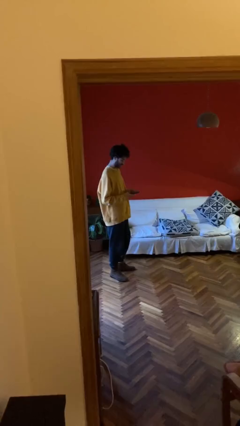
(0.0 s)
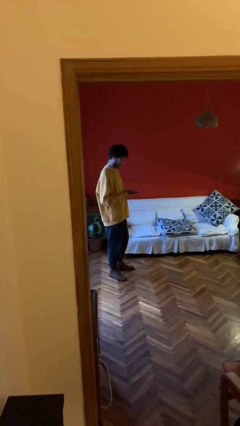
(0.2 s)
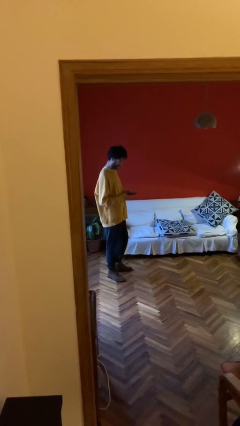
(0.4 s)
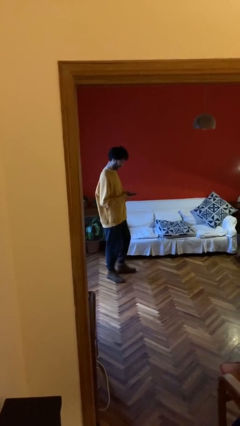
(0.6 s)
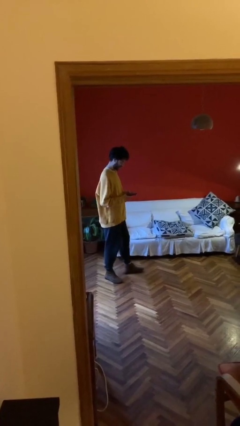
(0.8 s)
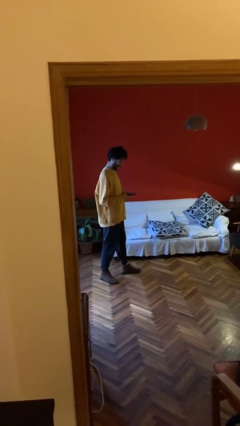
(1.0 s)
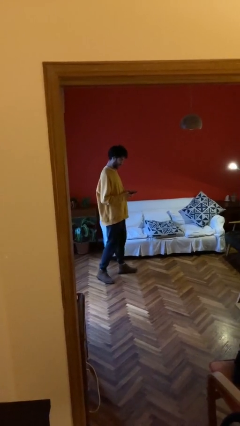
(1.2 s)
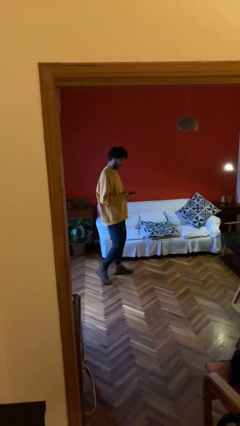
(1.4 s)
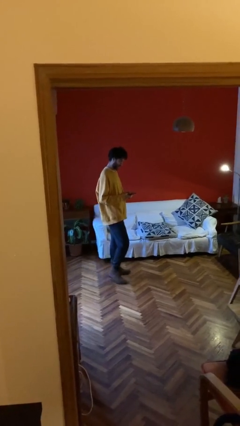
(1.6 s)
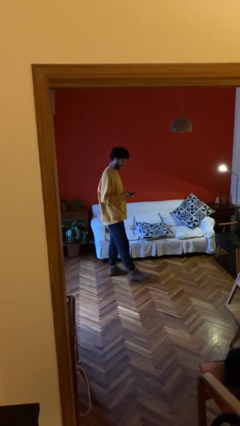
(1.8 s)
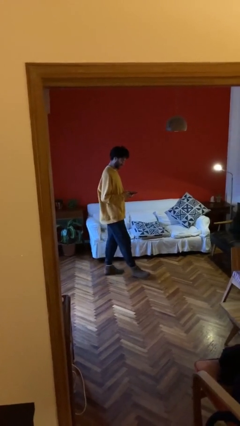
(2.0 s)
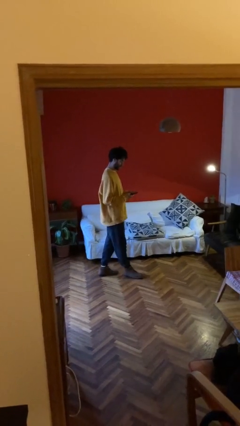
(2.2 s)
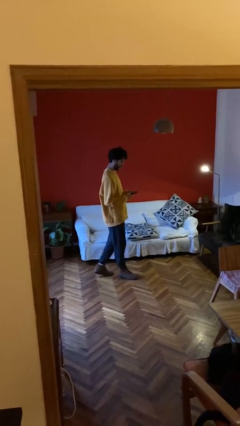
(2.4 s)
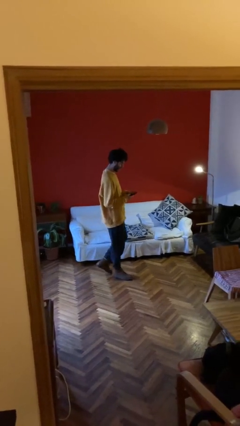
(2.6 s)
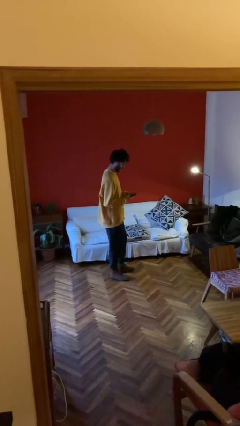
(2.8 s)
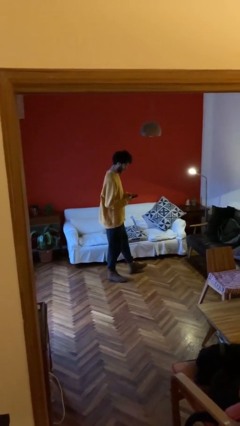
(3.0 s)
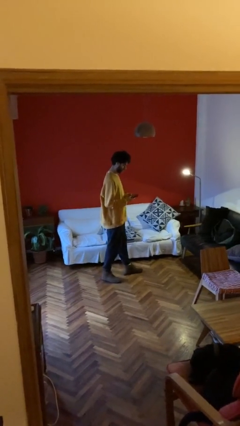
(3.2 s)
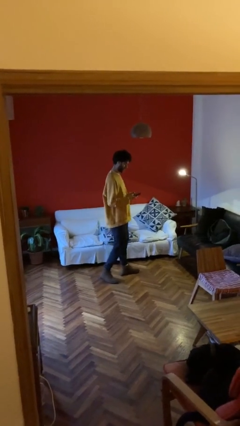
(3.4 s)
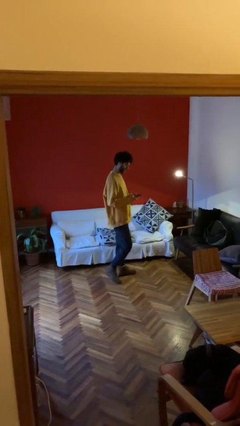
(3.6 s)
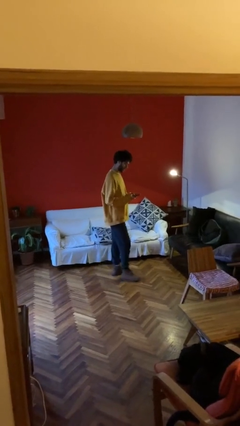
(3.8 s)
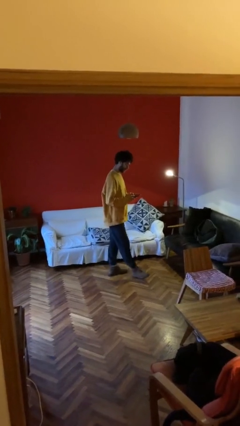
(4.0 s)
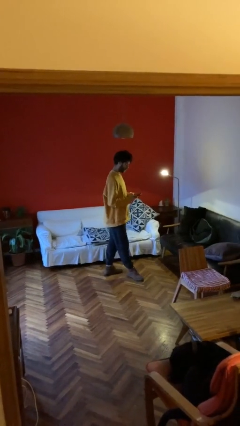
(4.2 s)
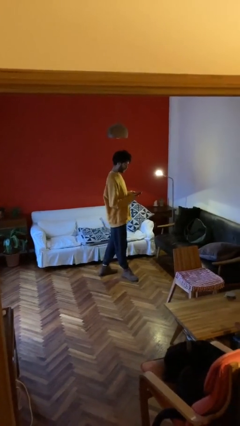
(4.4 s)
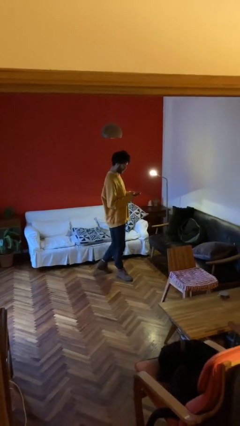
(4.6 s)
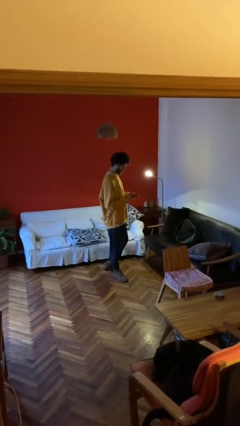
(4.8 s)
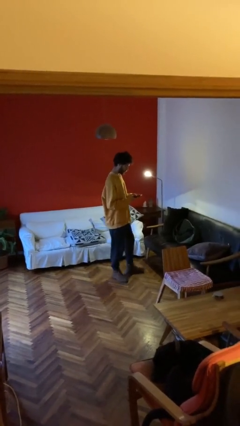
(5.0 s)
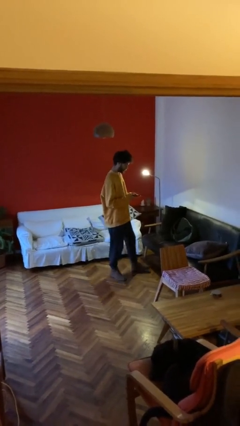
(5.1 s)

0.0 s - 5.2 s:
person texts on phone

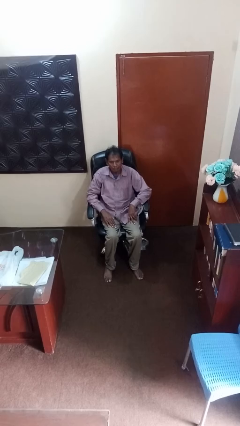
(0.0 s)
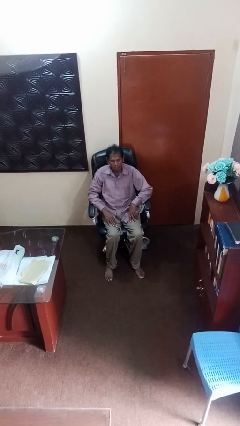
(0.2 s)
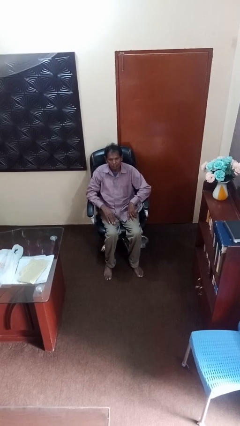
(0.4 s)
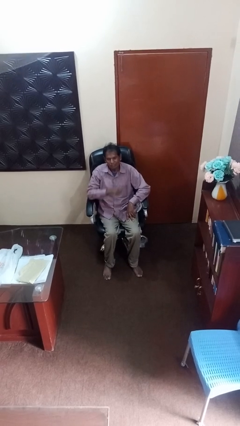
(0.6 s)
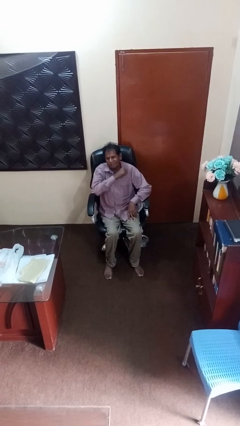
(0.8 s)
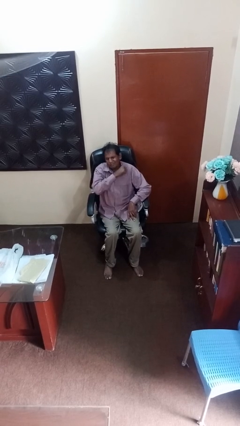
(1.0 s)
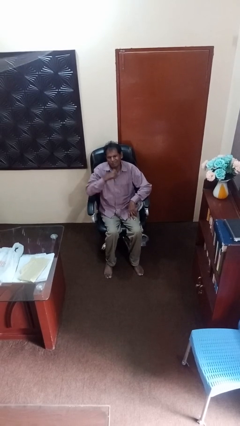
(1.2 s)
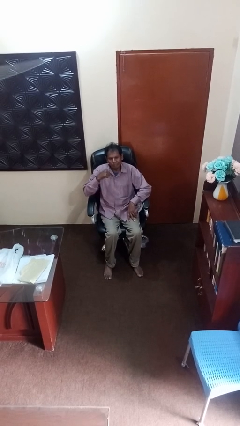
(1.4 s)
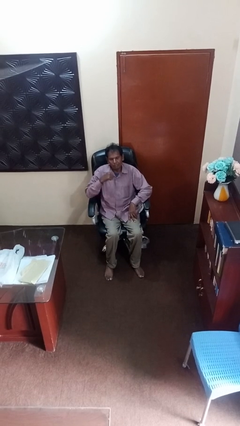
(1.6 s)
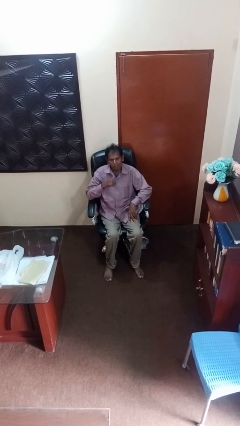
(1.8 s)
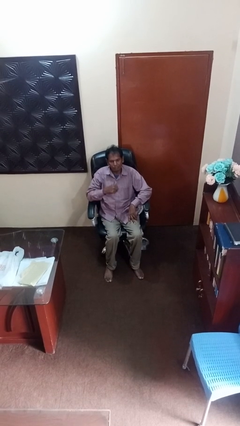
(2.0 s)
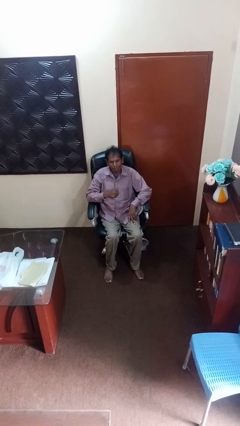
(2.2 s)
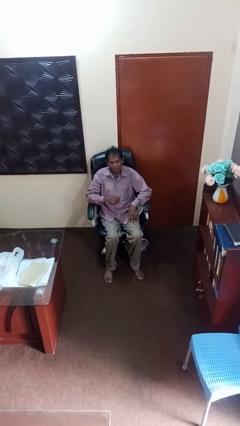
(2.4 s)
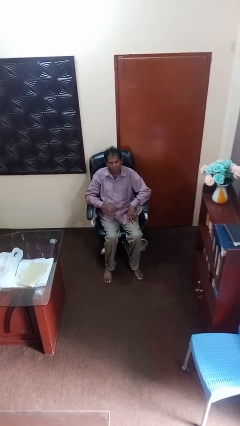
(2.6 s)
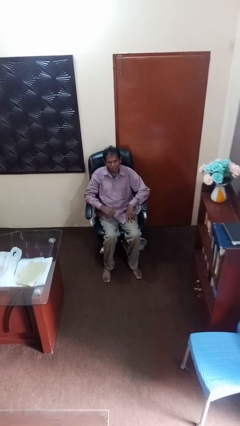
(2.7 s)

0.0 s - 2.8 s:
person gestures cut

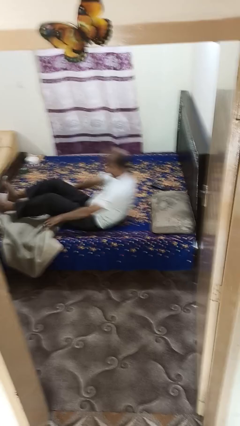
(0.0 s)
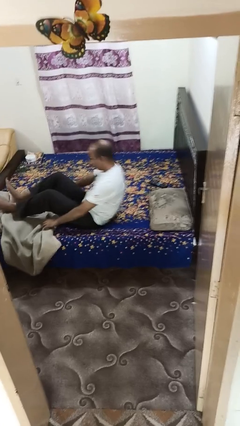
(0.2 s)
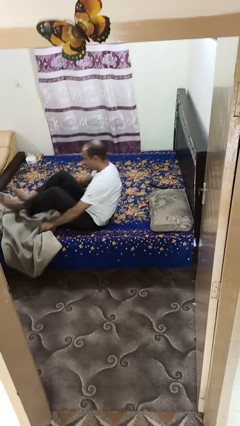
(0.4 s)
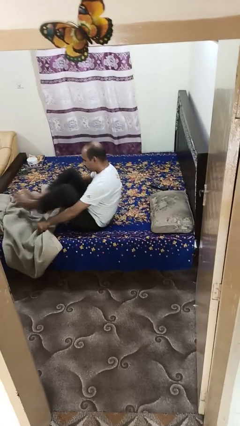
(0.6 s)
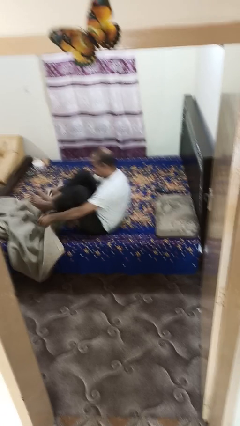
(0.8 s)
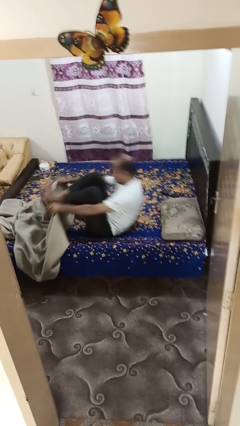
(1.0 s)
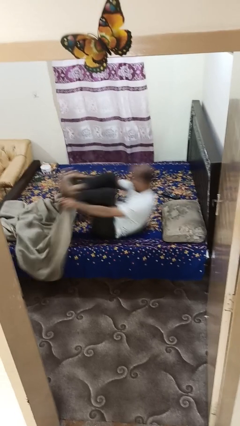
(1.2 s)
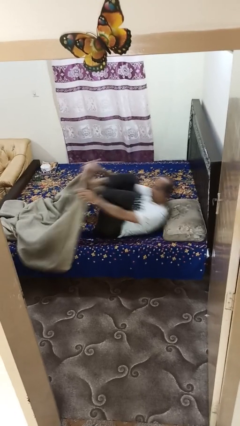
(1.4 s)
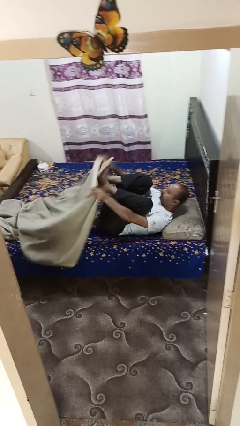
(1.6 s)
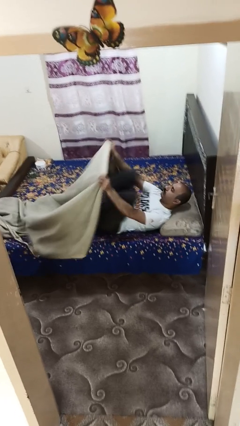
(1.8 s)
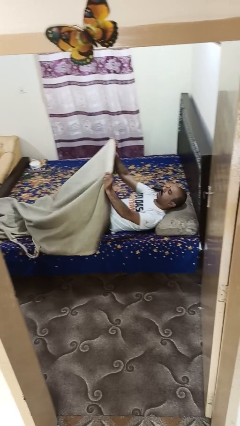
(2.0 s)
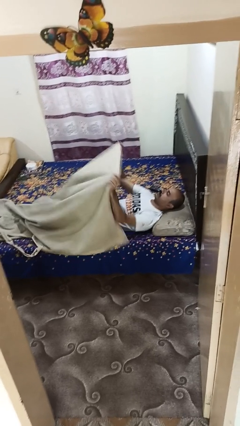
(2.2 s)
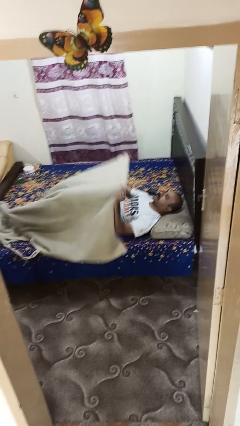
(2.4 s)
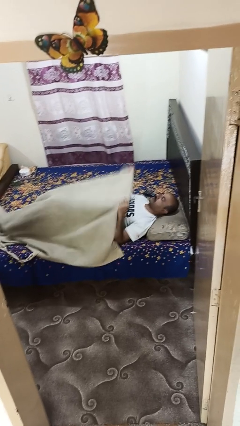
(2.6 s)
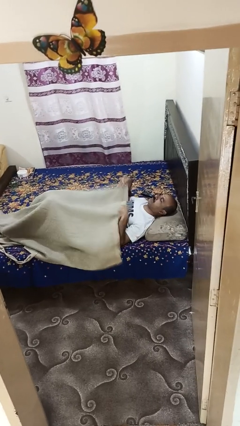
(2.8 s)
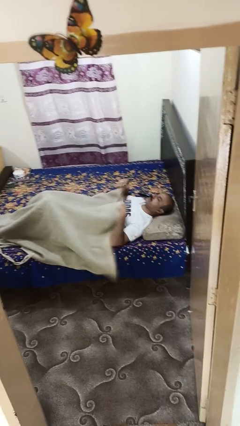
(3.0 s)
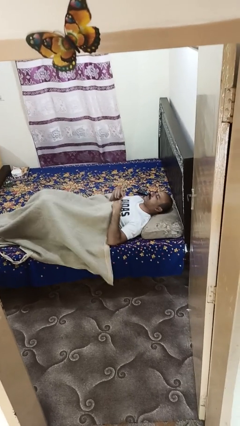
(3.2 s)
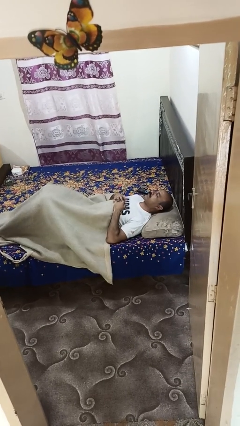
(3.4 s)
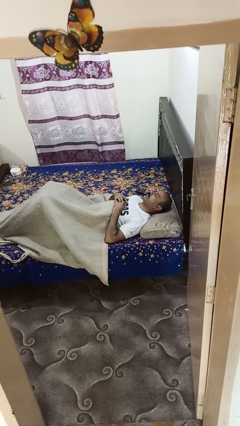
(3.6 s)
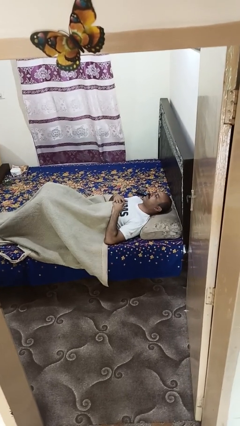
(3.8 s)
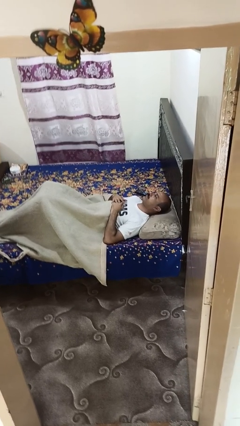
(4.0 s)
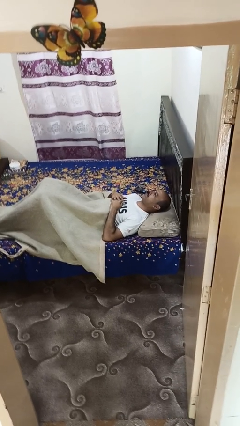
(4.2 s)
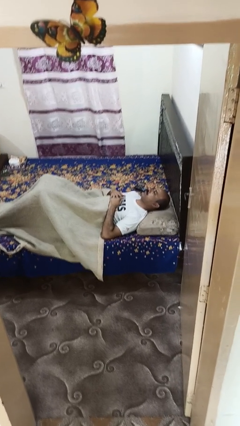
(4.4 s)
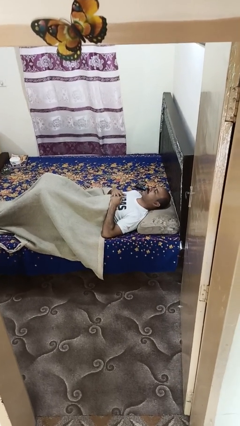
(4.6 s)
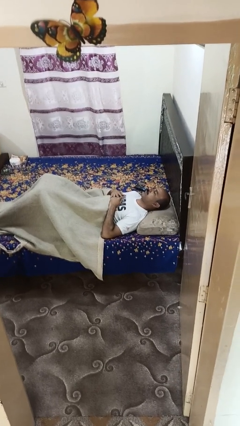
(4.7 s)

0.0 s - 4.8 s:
person covers with bedsheets

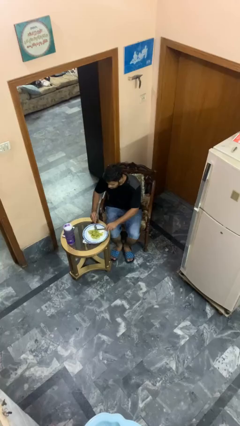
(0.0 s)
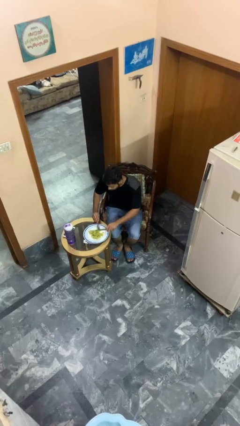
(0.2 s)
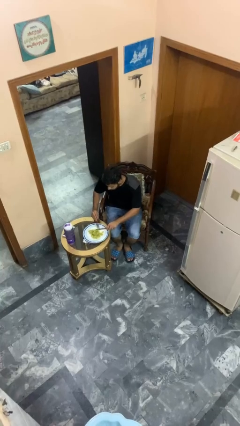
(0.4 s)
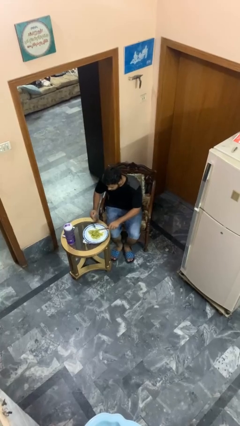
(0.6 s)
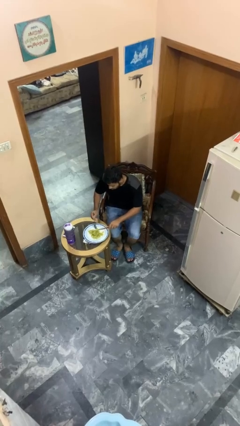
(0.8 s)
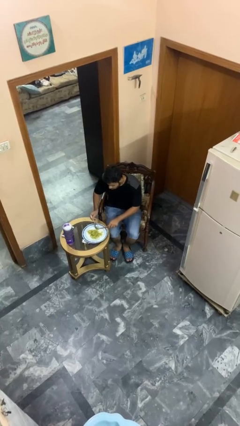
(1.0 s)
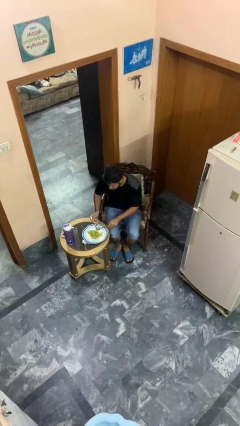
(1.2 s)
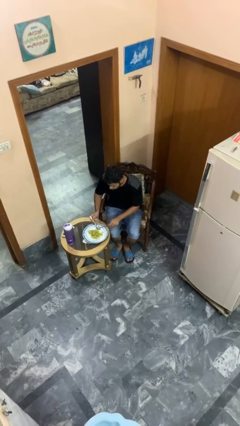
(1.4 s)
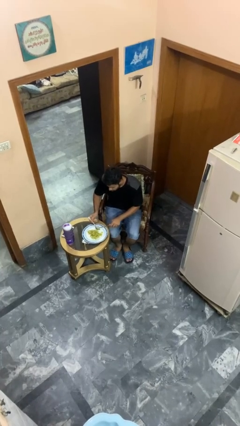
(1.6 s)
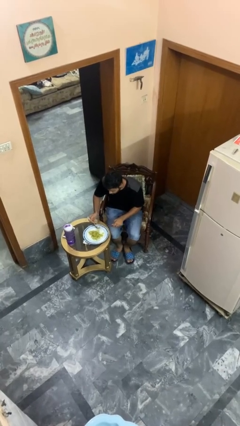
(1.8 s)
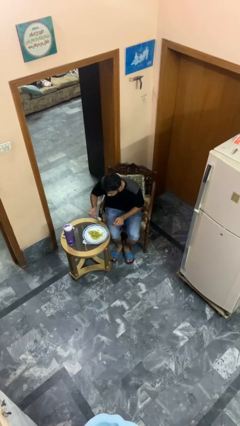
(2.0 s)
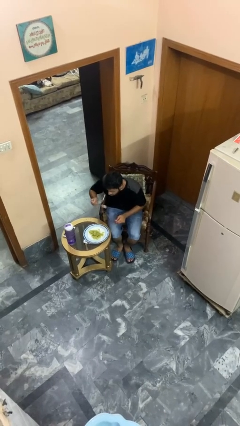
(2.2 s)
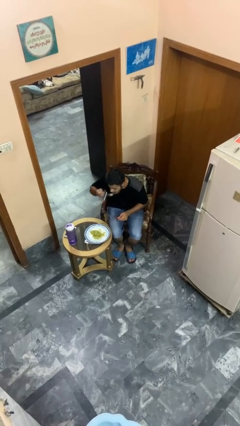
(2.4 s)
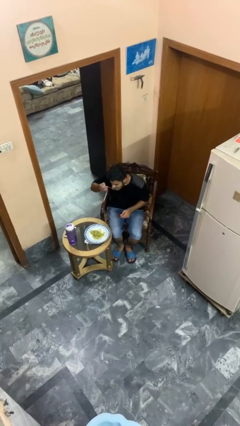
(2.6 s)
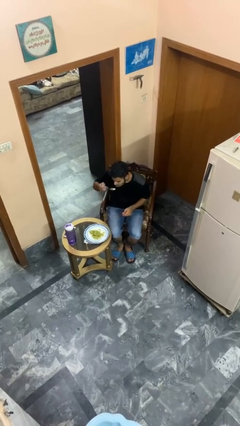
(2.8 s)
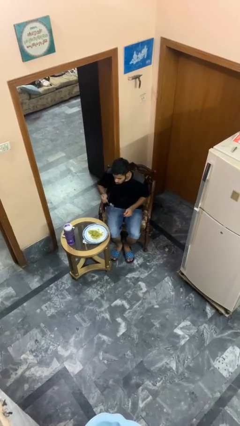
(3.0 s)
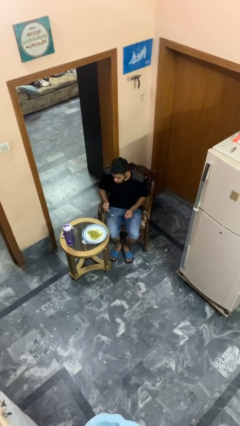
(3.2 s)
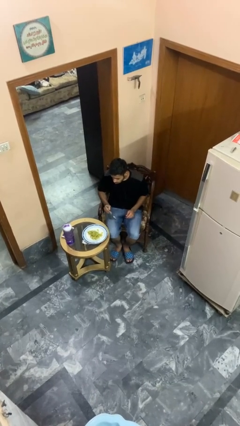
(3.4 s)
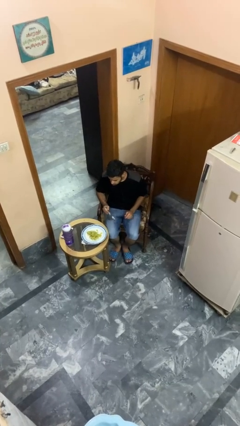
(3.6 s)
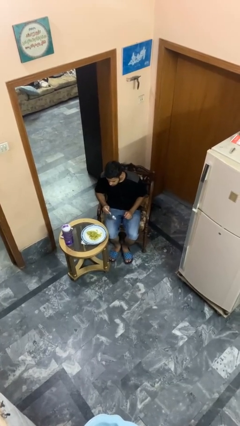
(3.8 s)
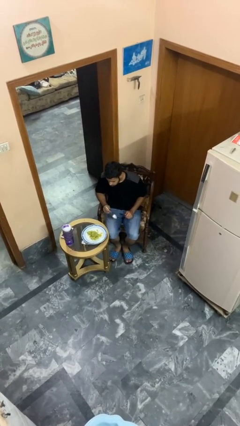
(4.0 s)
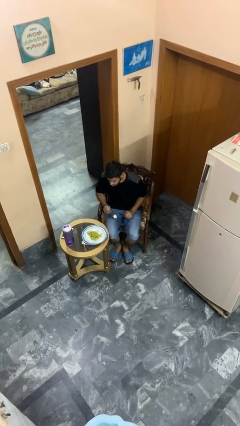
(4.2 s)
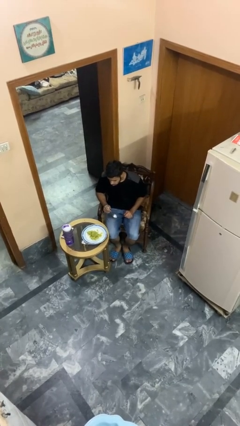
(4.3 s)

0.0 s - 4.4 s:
person eats with utensil

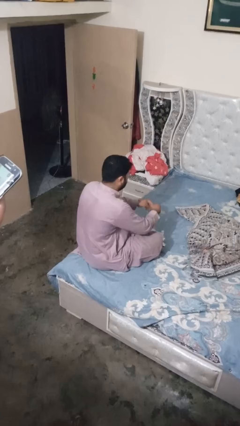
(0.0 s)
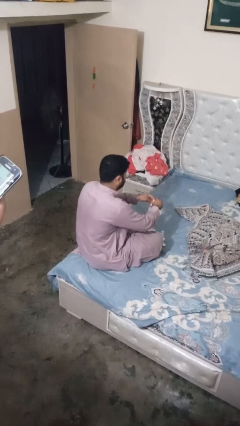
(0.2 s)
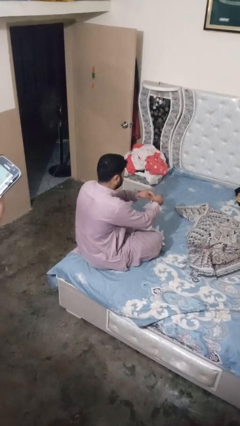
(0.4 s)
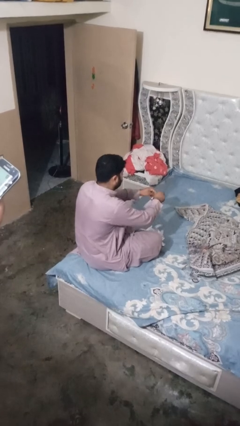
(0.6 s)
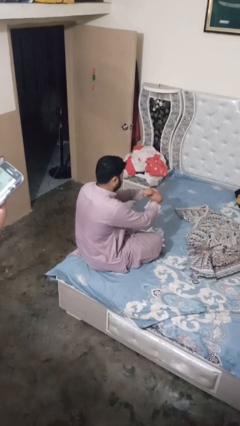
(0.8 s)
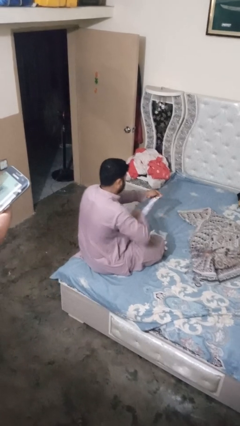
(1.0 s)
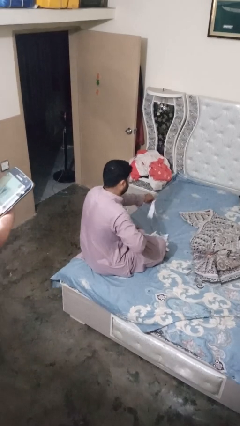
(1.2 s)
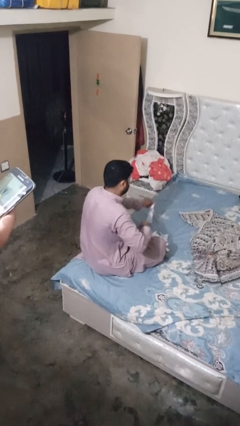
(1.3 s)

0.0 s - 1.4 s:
person tears paper
